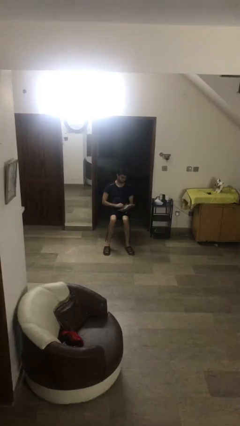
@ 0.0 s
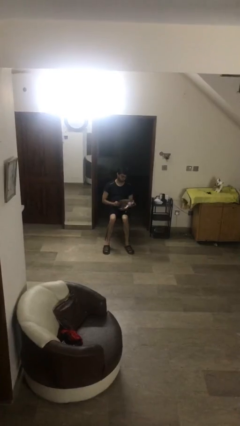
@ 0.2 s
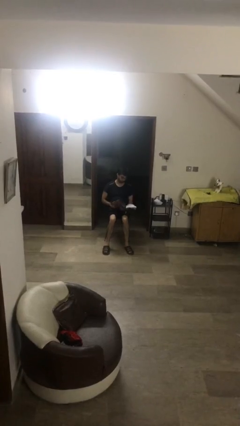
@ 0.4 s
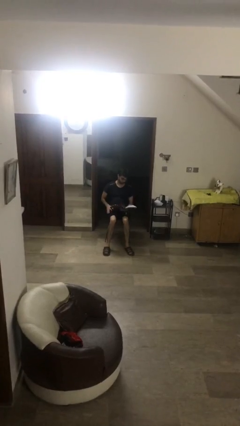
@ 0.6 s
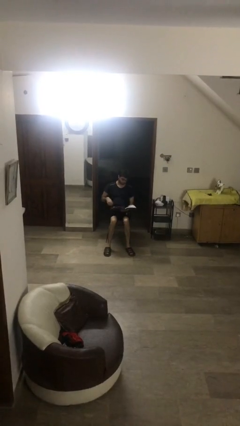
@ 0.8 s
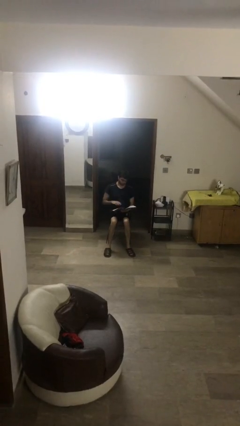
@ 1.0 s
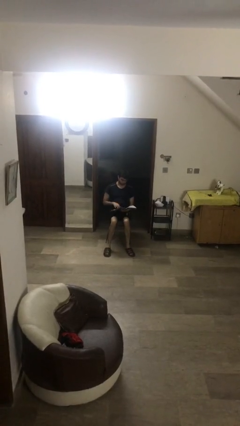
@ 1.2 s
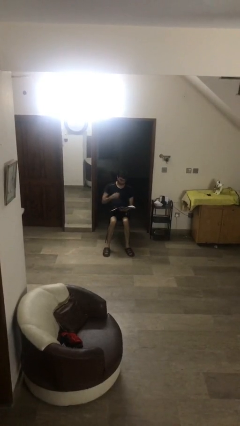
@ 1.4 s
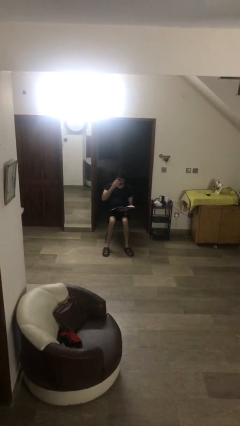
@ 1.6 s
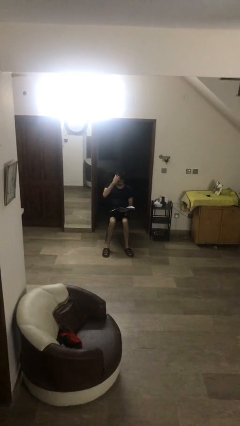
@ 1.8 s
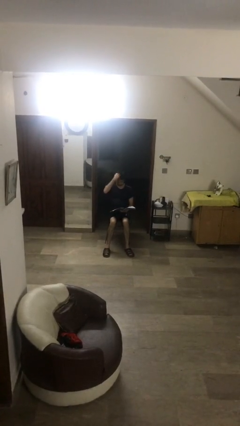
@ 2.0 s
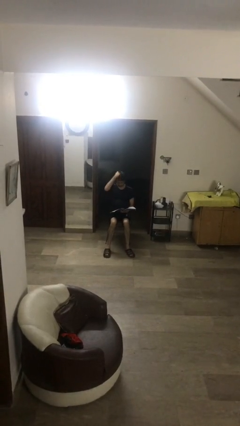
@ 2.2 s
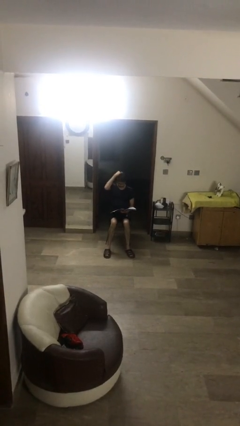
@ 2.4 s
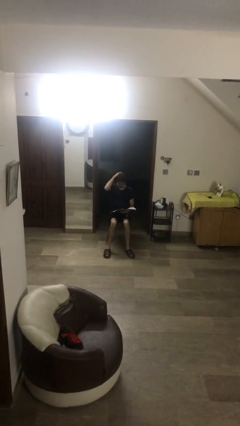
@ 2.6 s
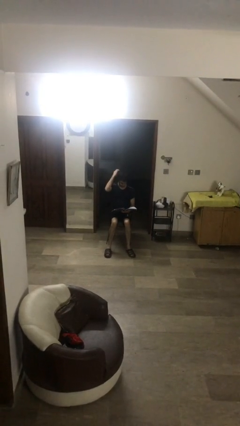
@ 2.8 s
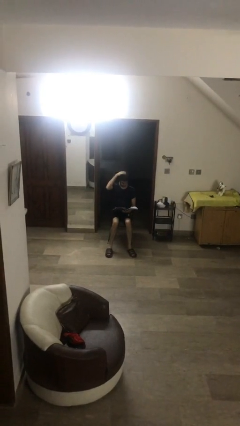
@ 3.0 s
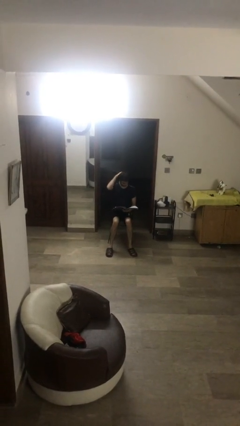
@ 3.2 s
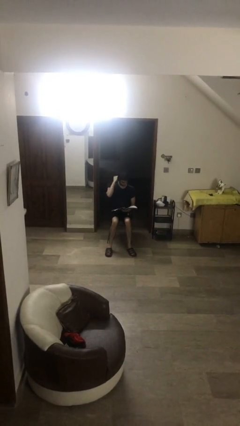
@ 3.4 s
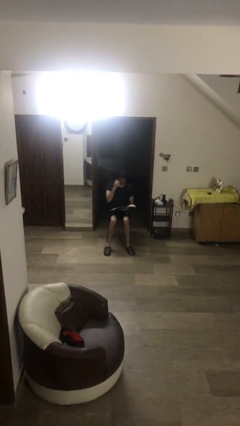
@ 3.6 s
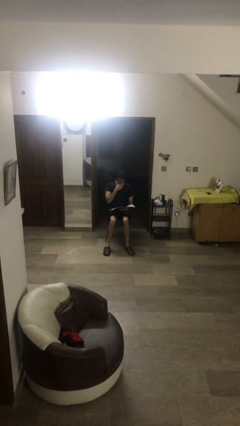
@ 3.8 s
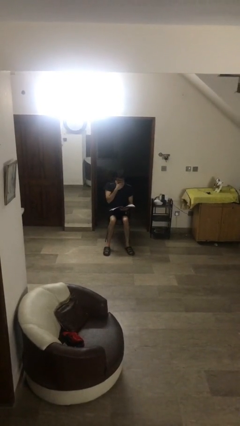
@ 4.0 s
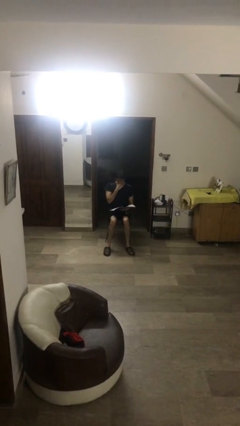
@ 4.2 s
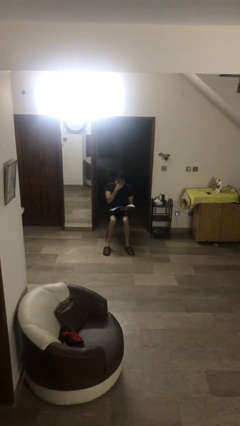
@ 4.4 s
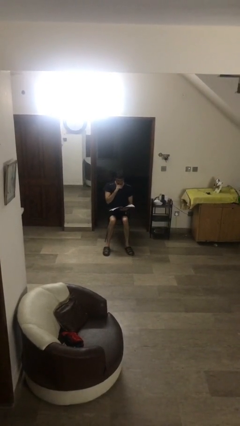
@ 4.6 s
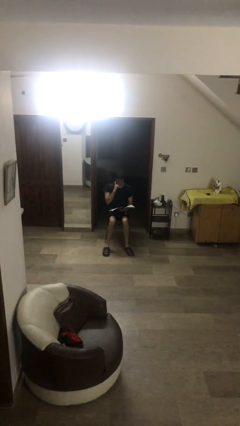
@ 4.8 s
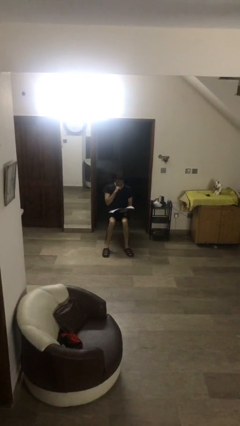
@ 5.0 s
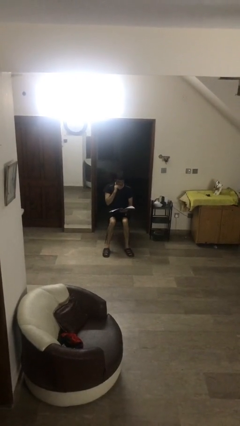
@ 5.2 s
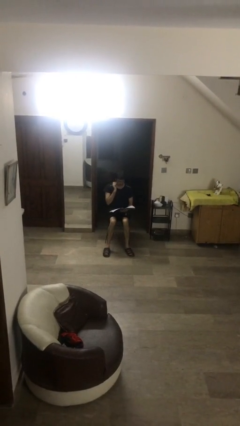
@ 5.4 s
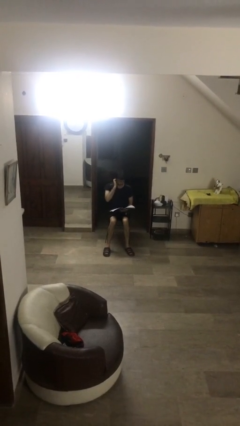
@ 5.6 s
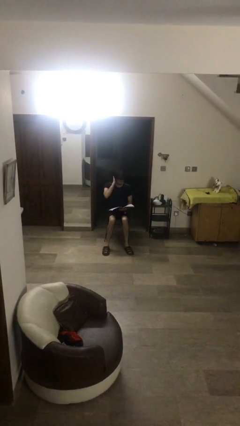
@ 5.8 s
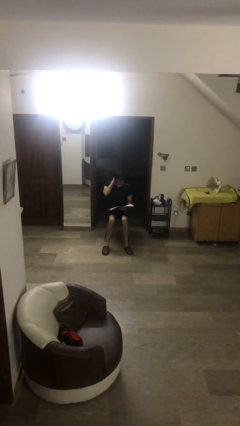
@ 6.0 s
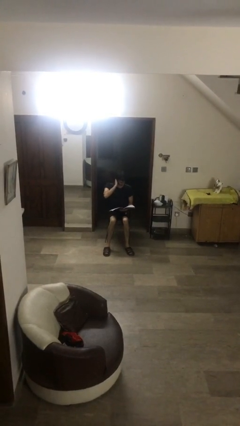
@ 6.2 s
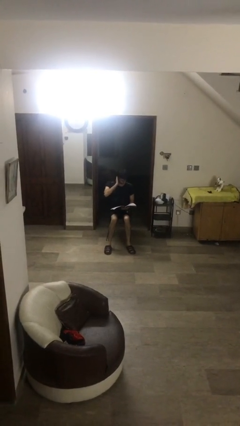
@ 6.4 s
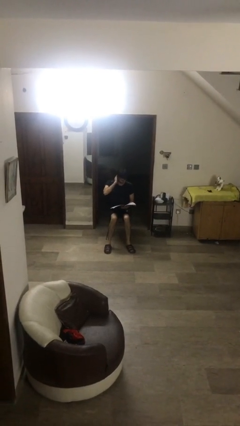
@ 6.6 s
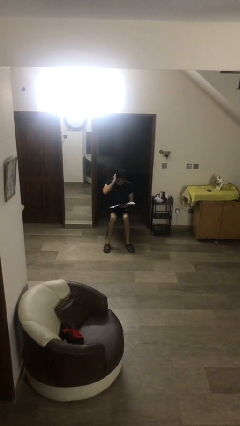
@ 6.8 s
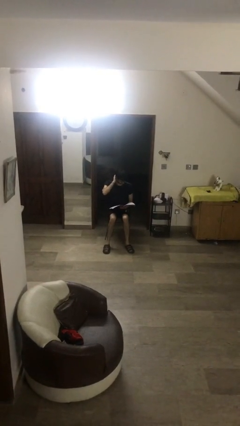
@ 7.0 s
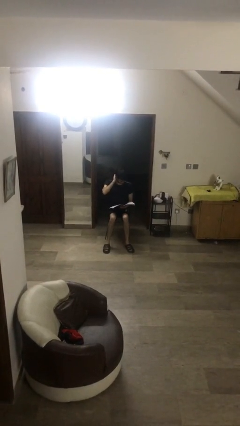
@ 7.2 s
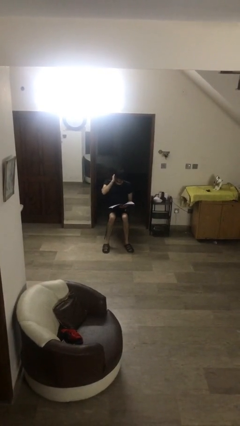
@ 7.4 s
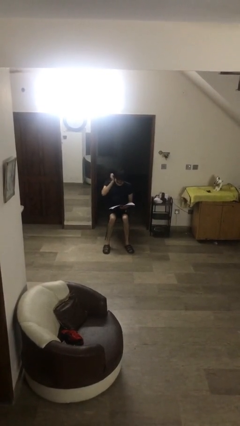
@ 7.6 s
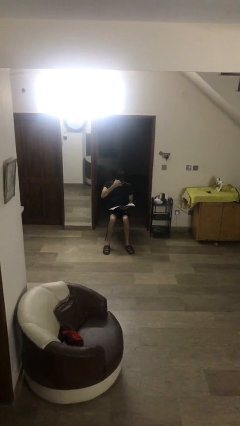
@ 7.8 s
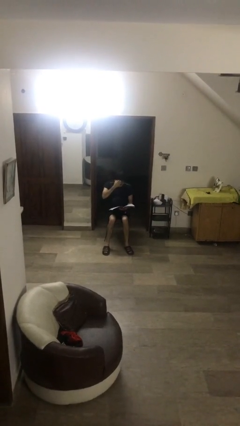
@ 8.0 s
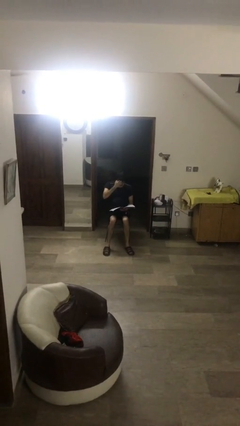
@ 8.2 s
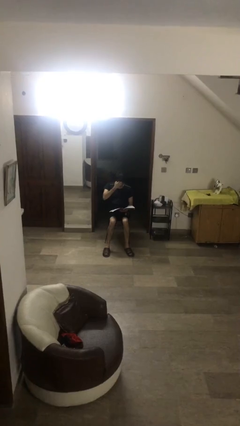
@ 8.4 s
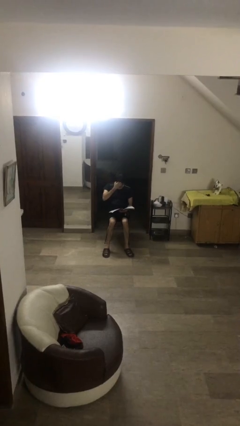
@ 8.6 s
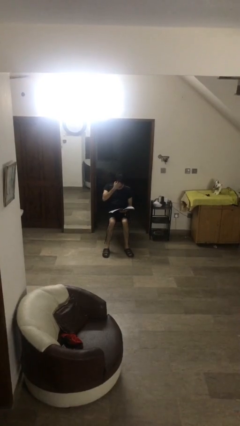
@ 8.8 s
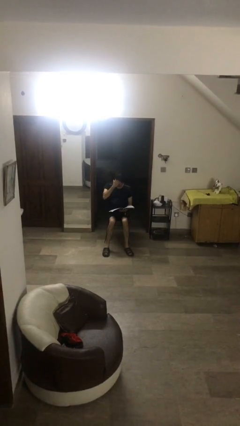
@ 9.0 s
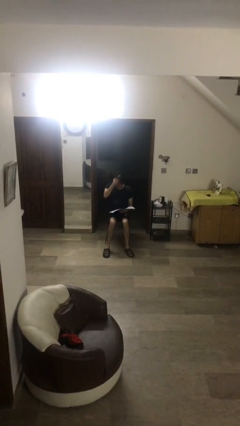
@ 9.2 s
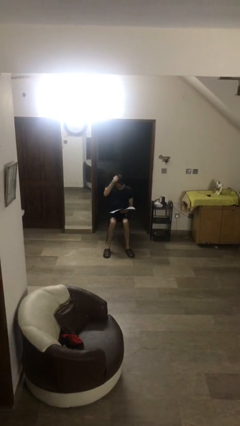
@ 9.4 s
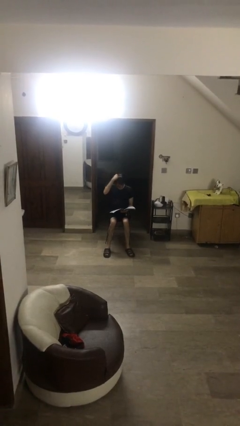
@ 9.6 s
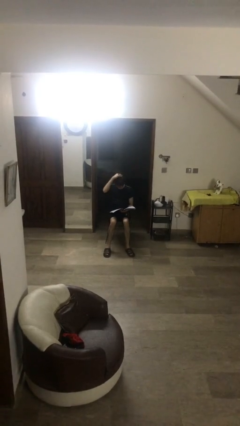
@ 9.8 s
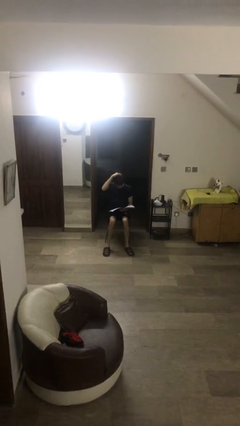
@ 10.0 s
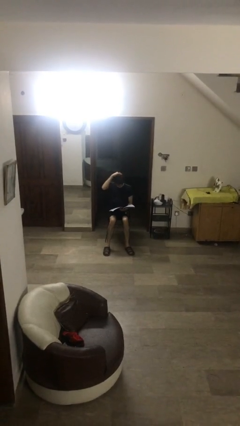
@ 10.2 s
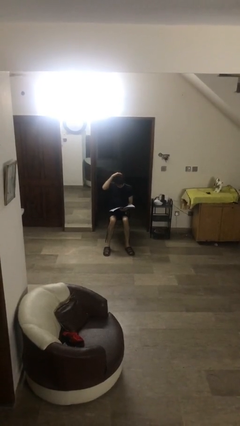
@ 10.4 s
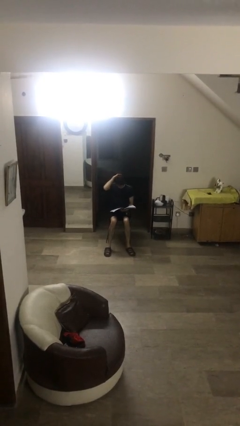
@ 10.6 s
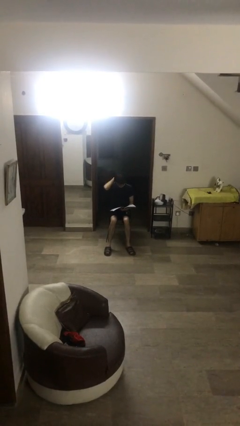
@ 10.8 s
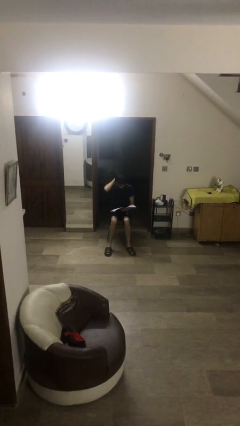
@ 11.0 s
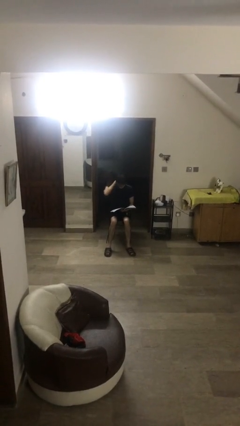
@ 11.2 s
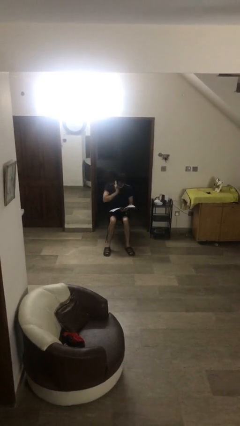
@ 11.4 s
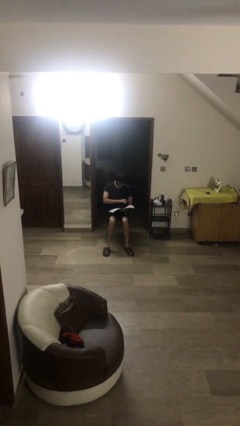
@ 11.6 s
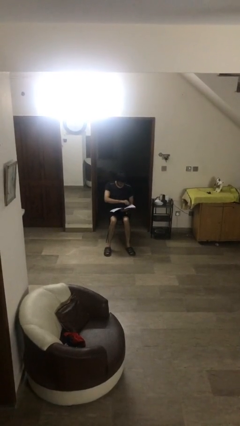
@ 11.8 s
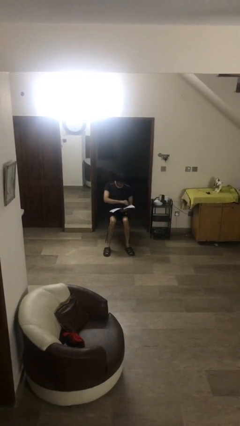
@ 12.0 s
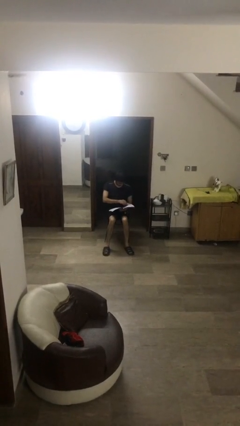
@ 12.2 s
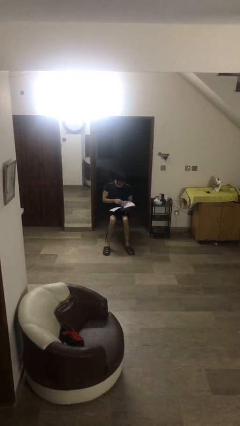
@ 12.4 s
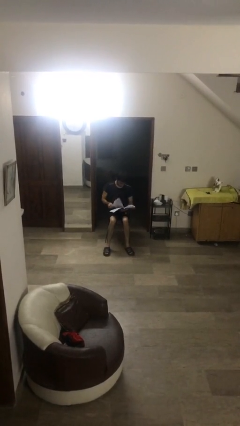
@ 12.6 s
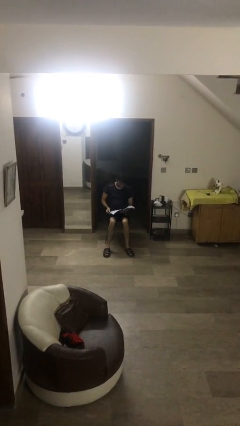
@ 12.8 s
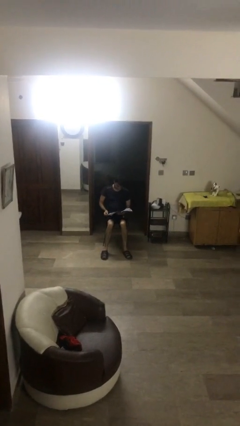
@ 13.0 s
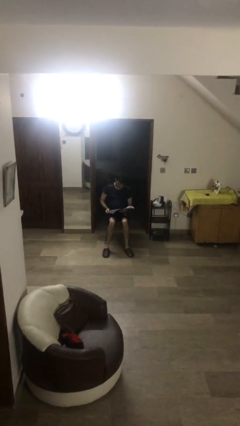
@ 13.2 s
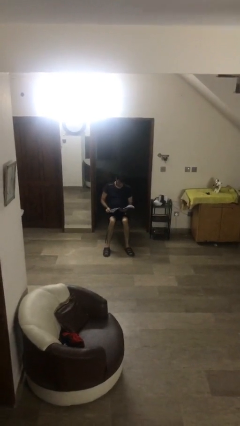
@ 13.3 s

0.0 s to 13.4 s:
person reads document

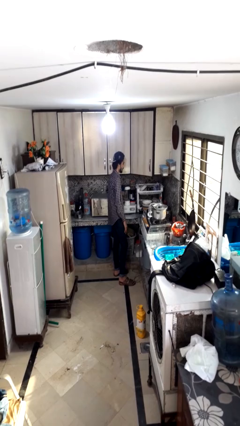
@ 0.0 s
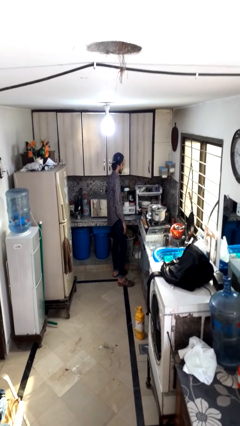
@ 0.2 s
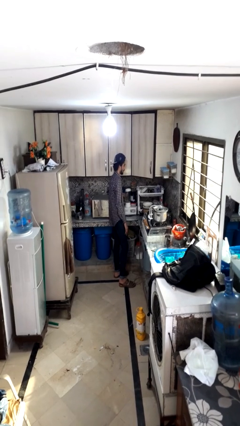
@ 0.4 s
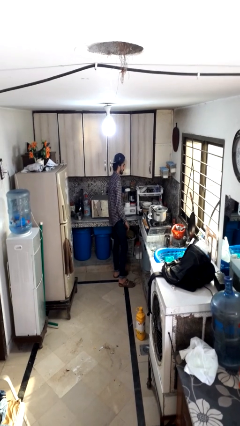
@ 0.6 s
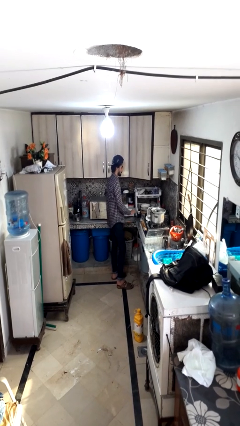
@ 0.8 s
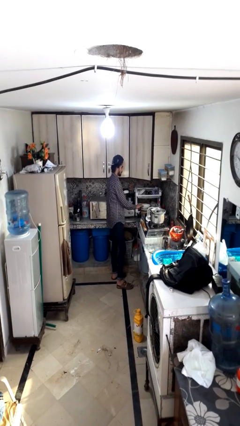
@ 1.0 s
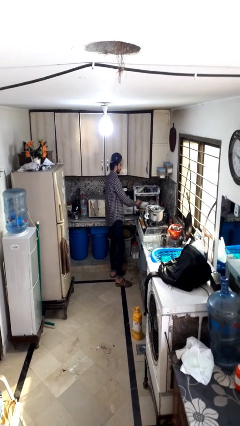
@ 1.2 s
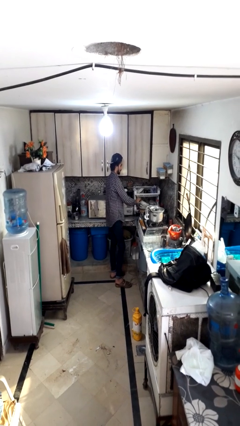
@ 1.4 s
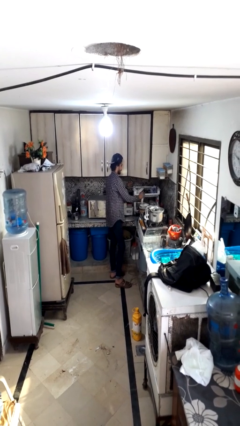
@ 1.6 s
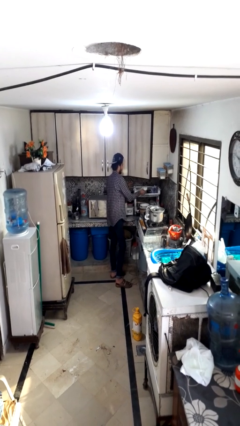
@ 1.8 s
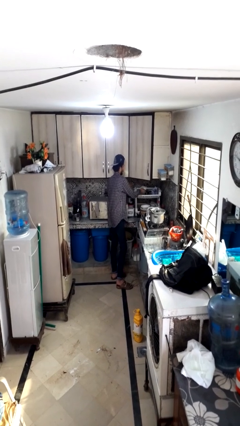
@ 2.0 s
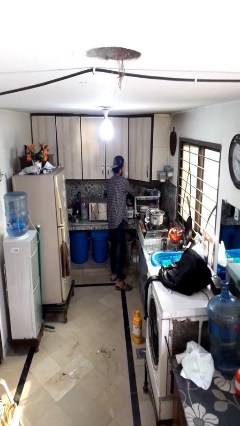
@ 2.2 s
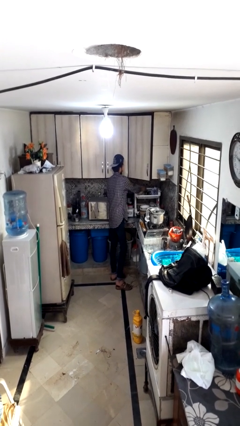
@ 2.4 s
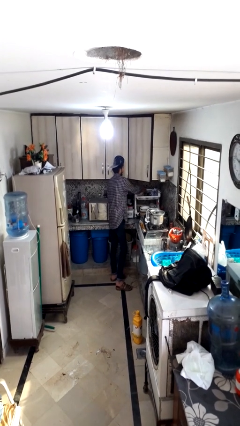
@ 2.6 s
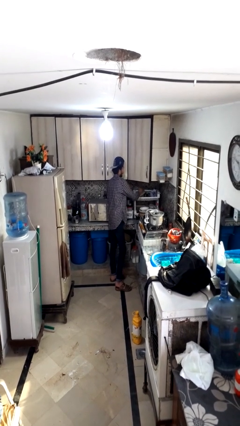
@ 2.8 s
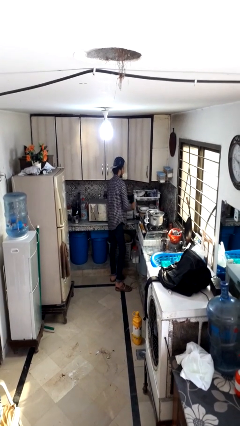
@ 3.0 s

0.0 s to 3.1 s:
person loads dishwasher

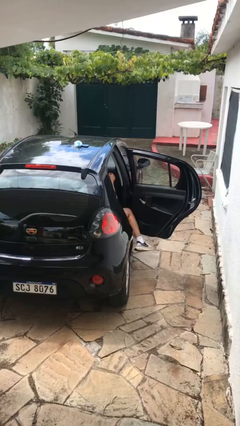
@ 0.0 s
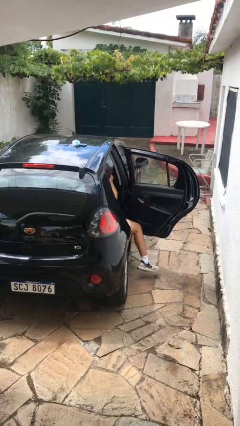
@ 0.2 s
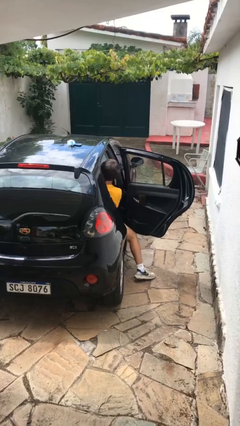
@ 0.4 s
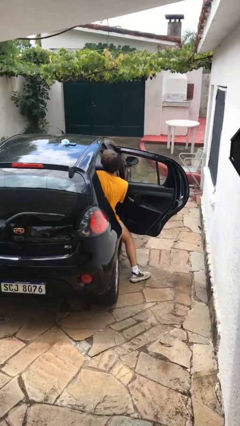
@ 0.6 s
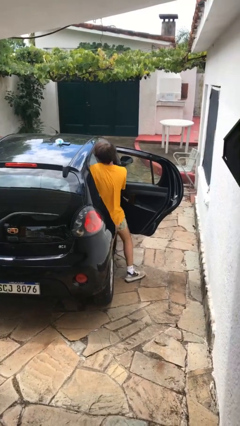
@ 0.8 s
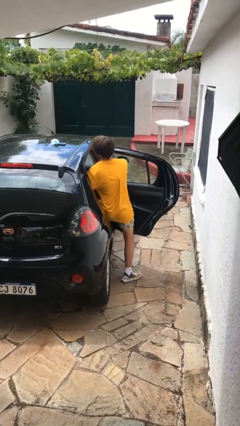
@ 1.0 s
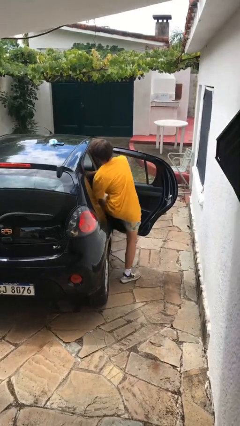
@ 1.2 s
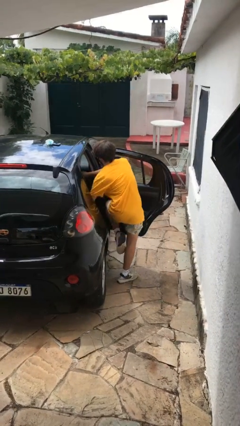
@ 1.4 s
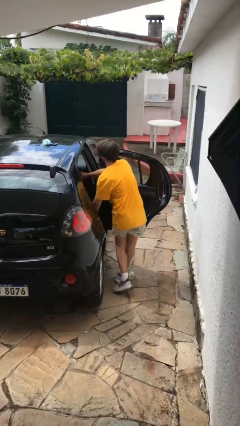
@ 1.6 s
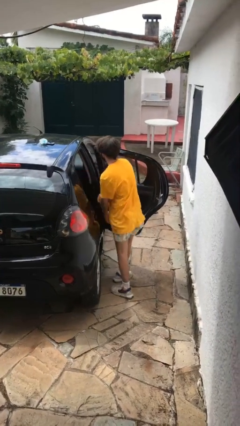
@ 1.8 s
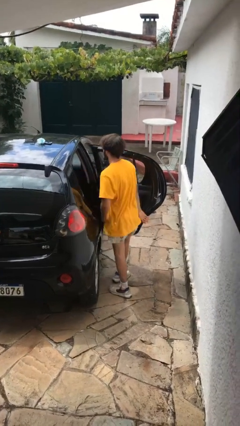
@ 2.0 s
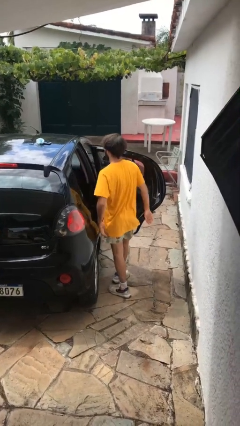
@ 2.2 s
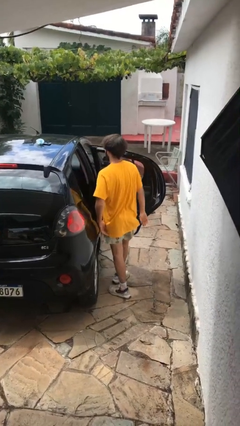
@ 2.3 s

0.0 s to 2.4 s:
person exits car
